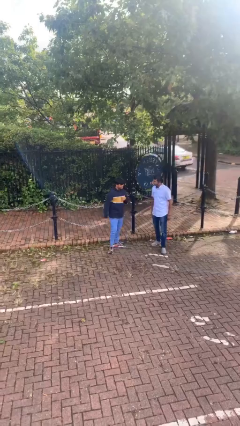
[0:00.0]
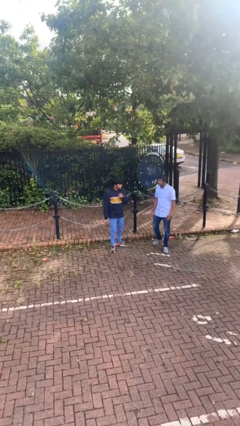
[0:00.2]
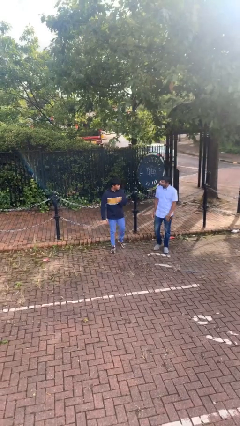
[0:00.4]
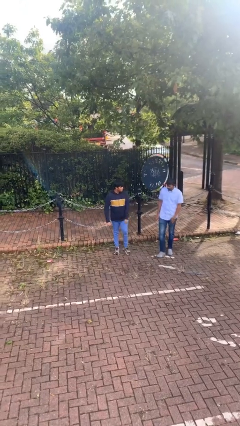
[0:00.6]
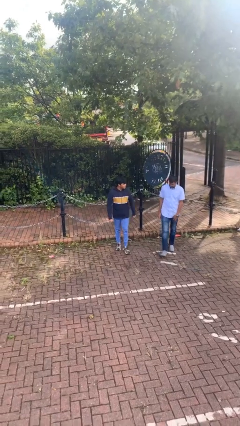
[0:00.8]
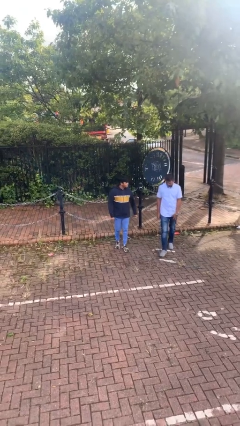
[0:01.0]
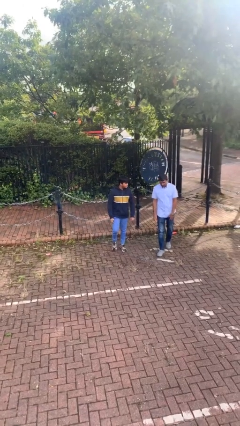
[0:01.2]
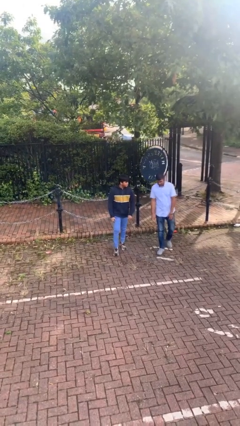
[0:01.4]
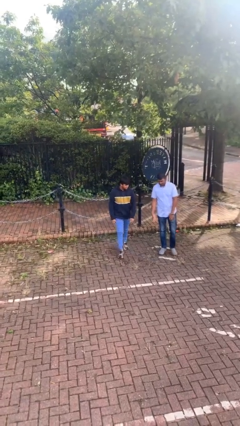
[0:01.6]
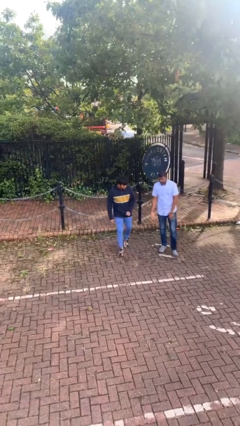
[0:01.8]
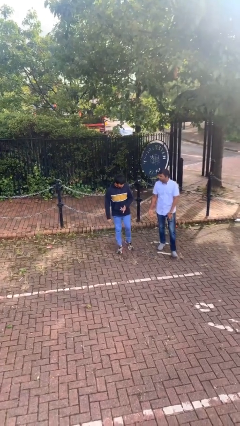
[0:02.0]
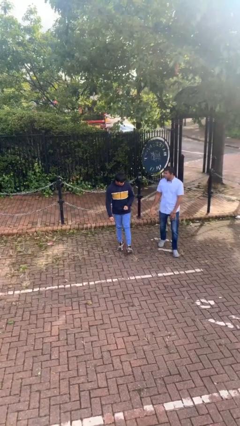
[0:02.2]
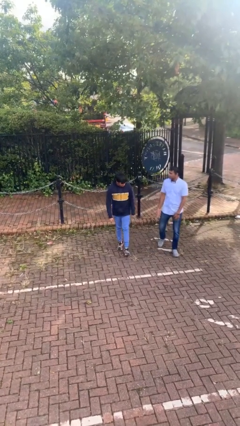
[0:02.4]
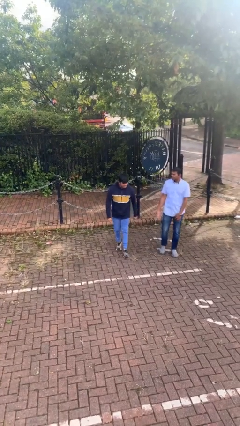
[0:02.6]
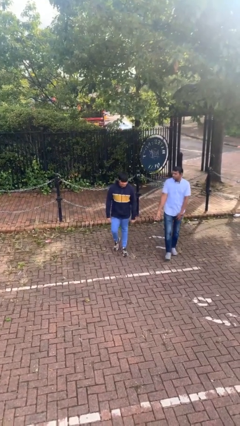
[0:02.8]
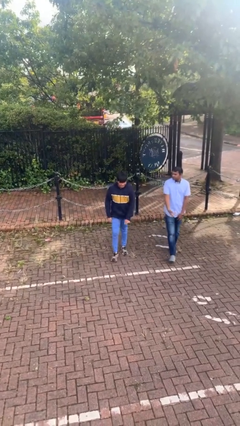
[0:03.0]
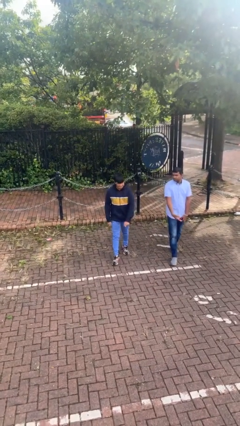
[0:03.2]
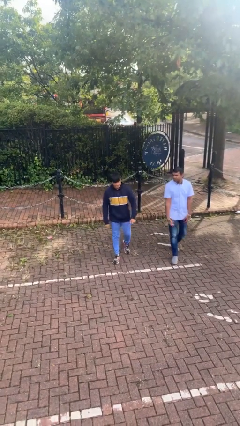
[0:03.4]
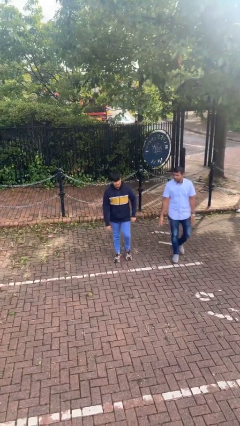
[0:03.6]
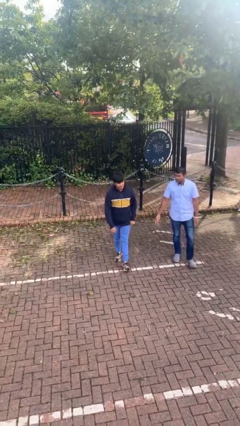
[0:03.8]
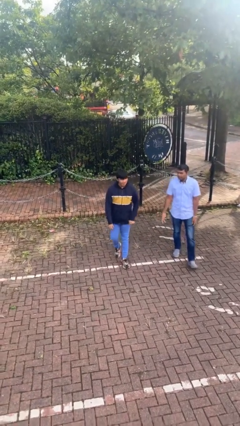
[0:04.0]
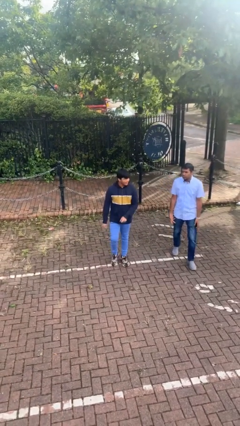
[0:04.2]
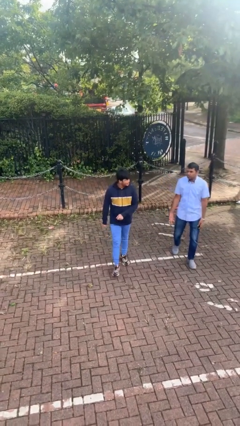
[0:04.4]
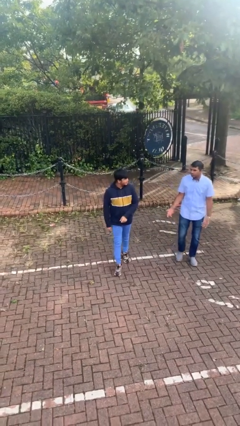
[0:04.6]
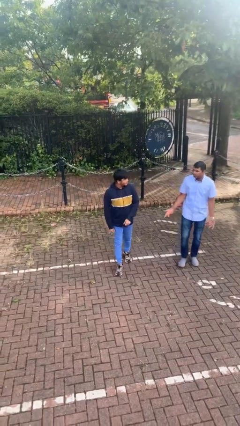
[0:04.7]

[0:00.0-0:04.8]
person talks to person

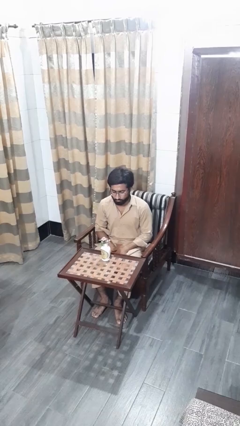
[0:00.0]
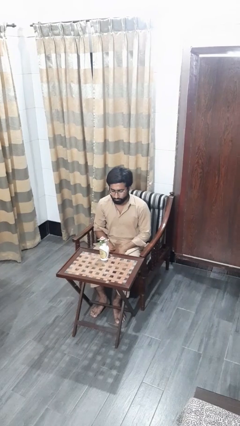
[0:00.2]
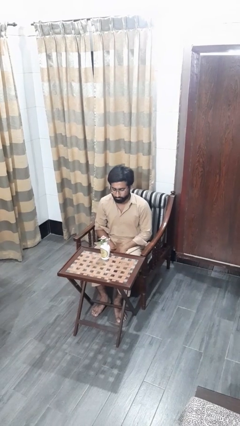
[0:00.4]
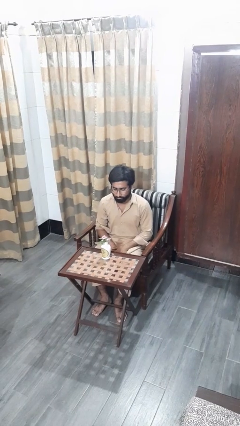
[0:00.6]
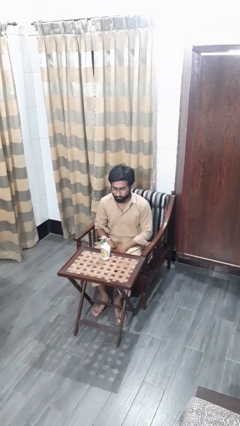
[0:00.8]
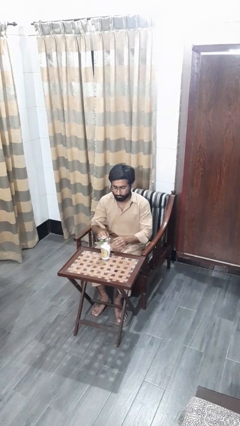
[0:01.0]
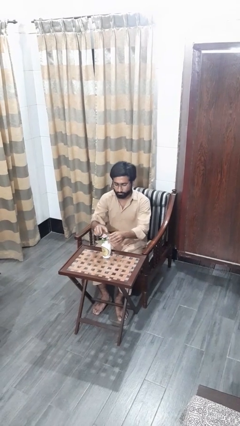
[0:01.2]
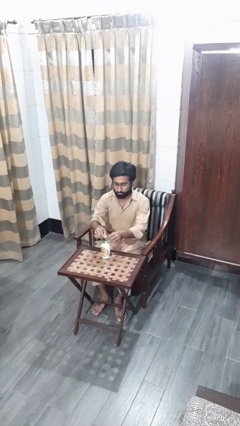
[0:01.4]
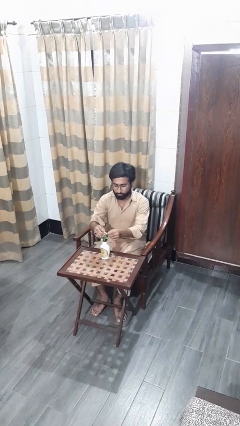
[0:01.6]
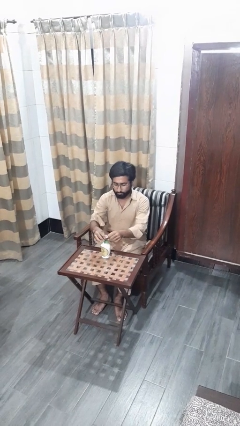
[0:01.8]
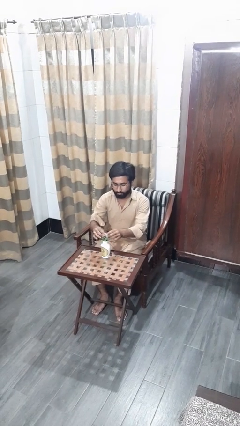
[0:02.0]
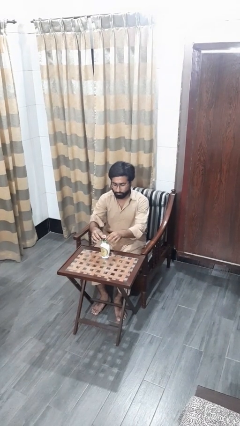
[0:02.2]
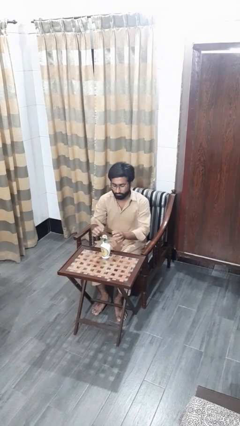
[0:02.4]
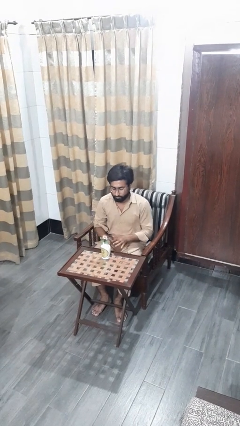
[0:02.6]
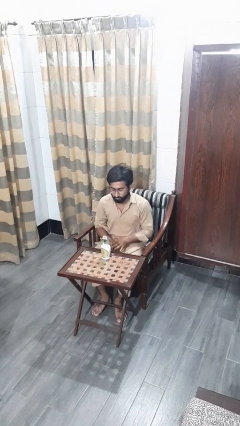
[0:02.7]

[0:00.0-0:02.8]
person arranges flowers in vase

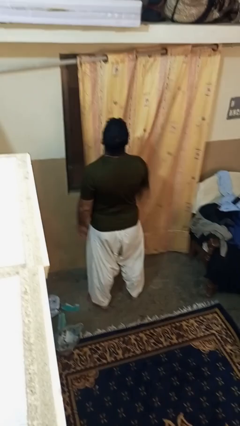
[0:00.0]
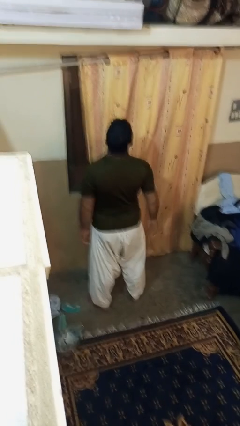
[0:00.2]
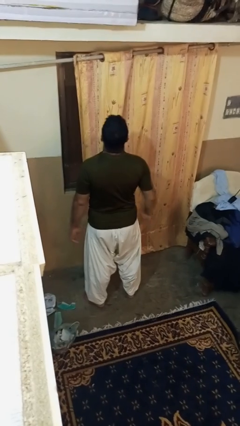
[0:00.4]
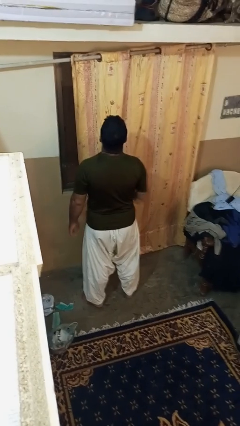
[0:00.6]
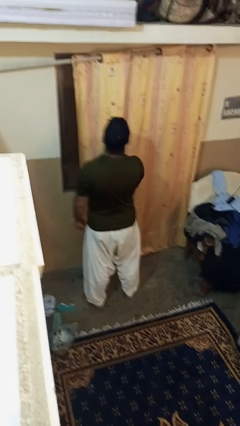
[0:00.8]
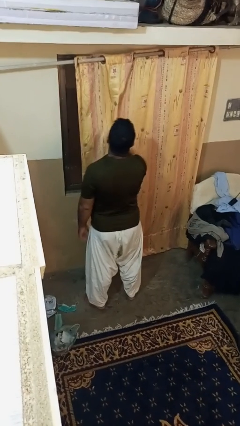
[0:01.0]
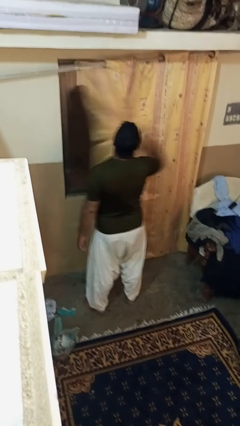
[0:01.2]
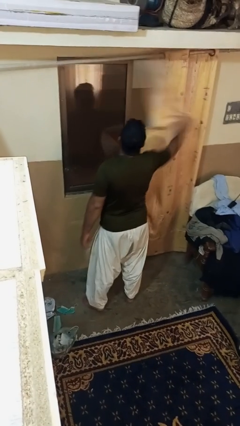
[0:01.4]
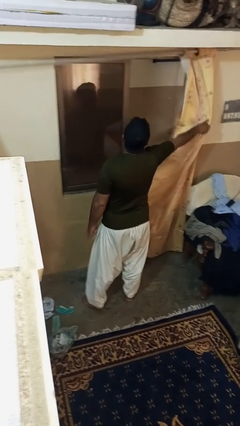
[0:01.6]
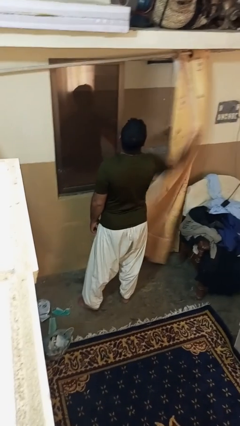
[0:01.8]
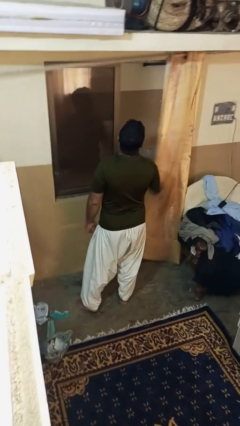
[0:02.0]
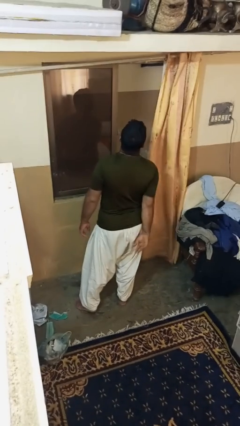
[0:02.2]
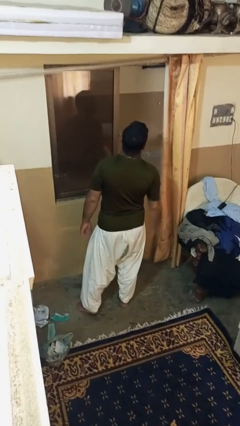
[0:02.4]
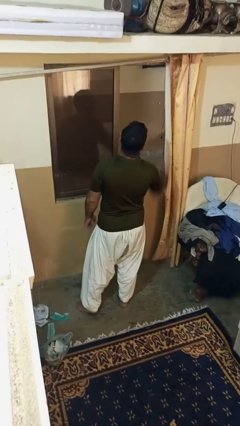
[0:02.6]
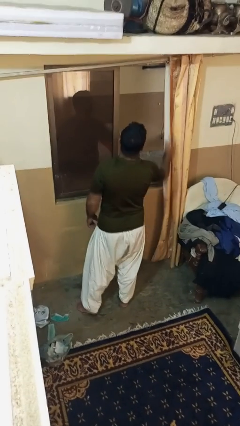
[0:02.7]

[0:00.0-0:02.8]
person opens curtains

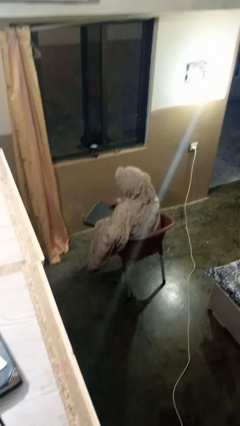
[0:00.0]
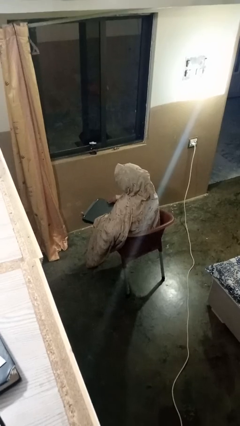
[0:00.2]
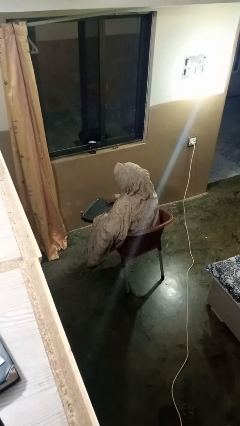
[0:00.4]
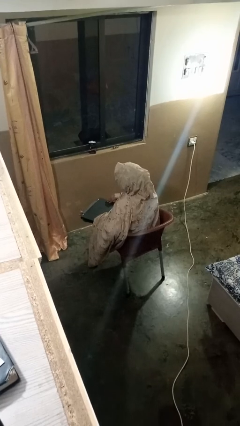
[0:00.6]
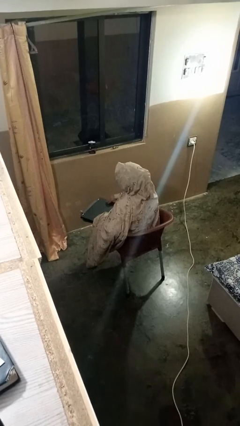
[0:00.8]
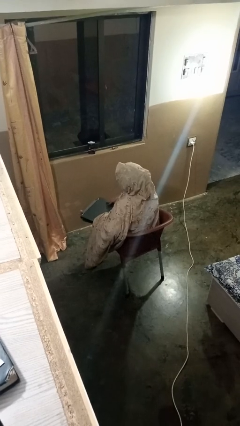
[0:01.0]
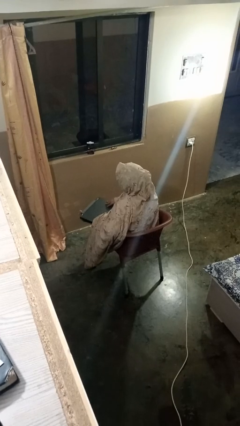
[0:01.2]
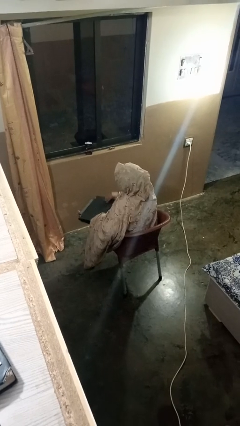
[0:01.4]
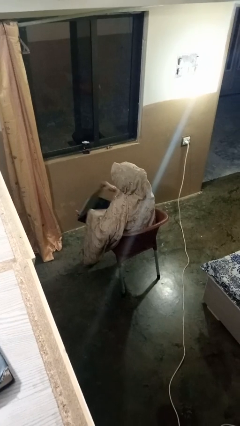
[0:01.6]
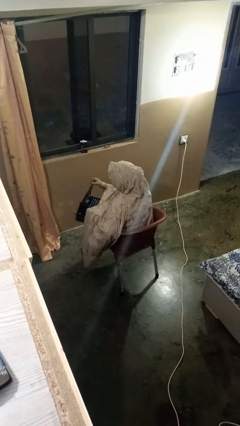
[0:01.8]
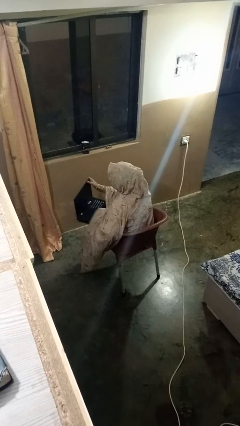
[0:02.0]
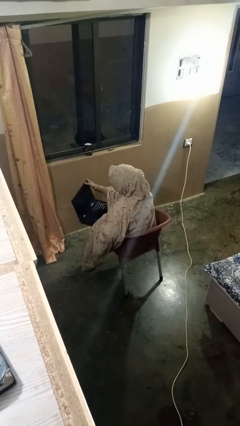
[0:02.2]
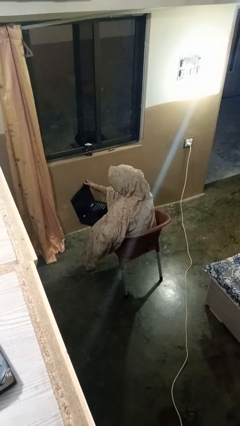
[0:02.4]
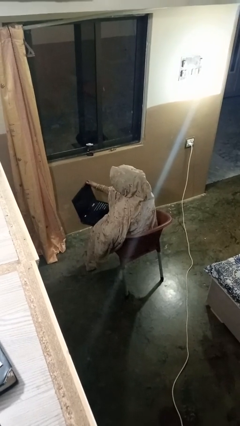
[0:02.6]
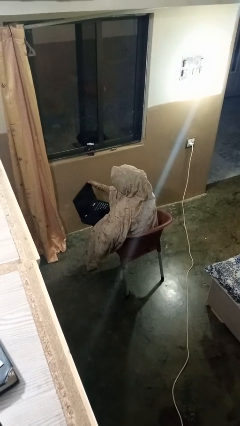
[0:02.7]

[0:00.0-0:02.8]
person opens laptop

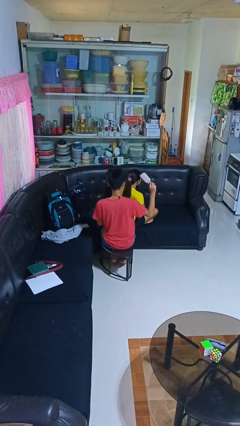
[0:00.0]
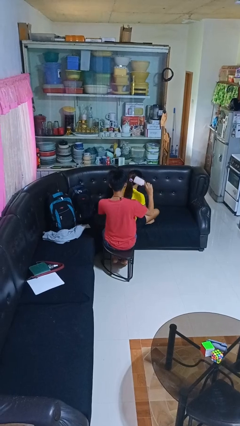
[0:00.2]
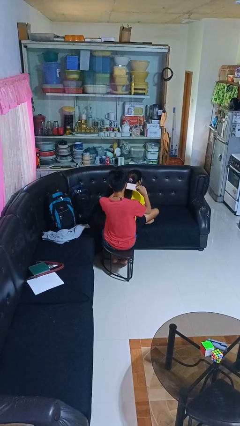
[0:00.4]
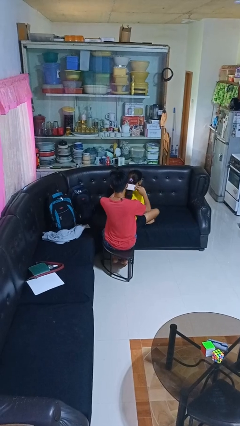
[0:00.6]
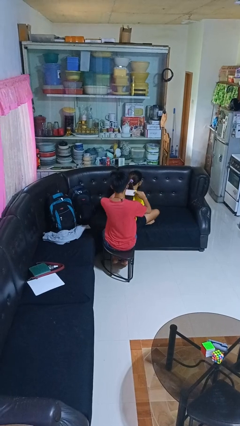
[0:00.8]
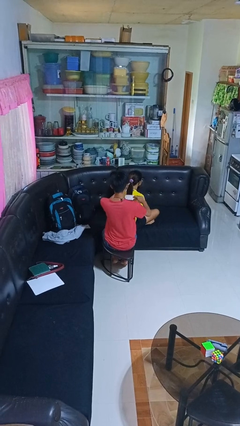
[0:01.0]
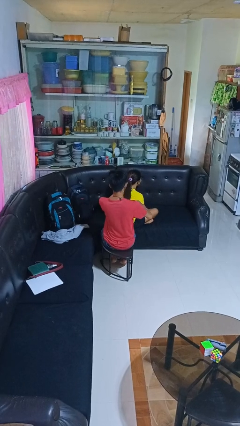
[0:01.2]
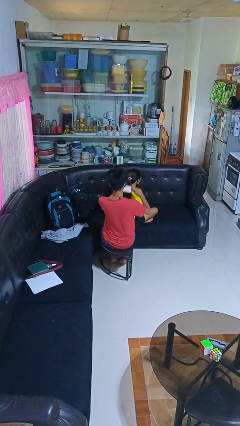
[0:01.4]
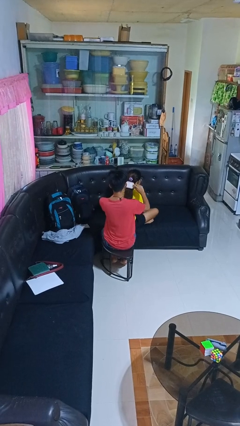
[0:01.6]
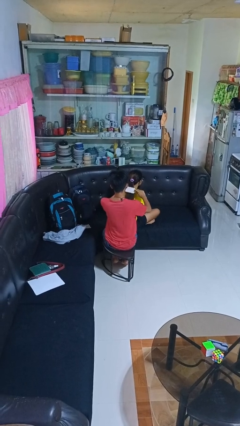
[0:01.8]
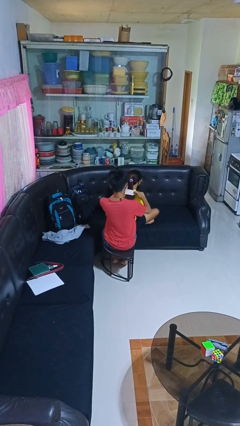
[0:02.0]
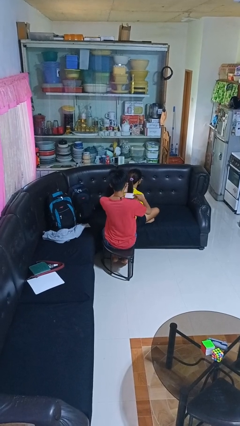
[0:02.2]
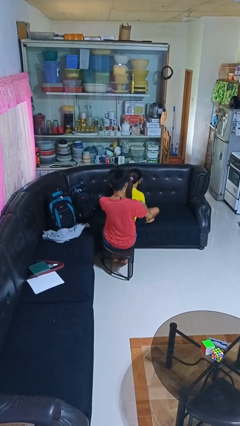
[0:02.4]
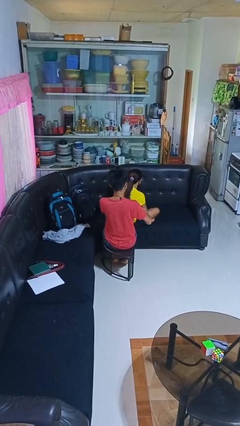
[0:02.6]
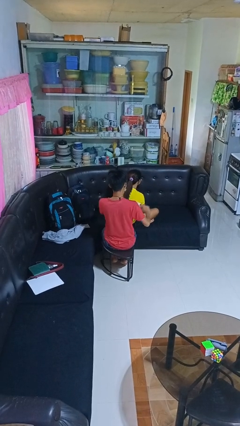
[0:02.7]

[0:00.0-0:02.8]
person brushes hair of person

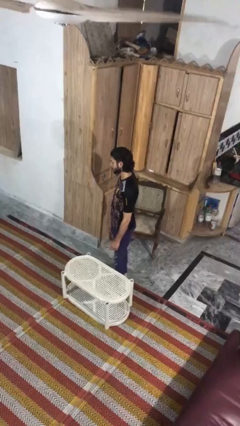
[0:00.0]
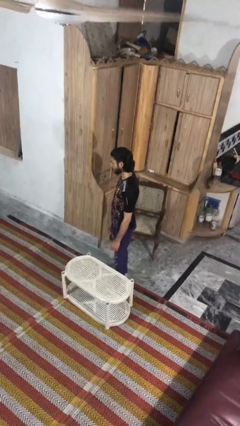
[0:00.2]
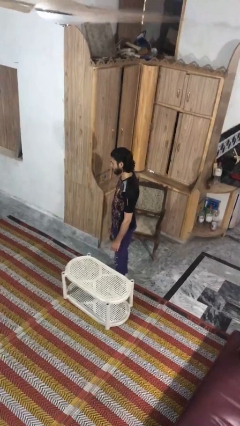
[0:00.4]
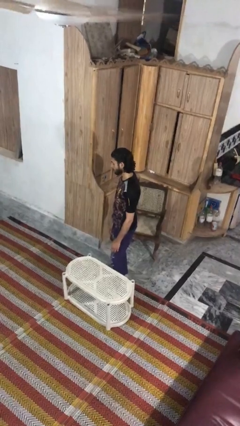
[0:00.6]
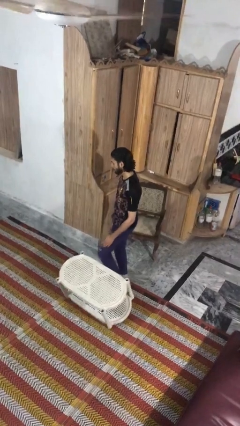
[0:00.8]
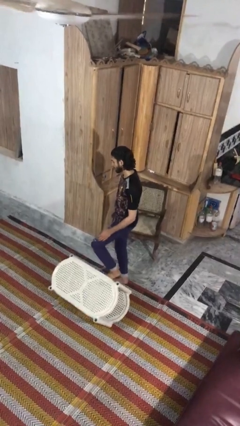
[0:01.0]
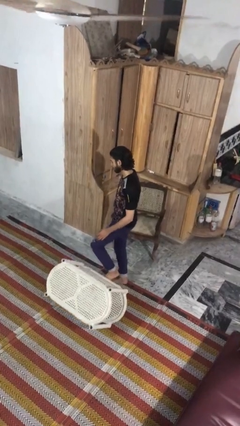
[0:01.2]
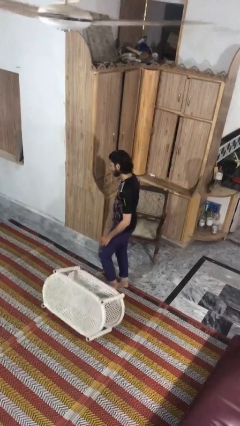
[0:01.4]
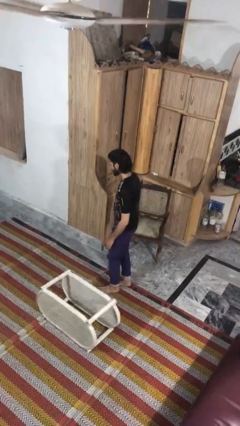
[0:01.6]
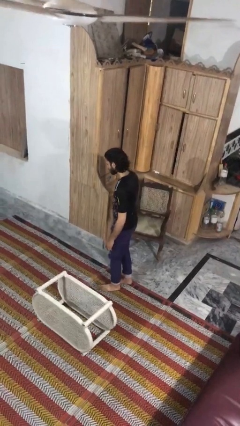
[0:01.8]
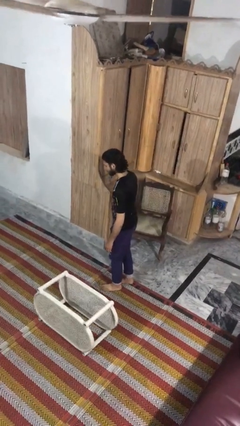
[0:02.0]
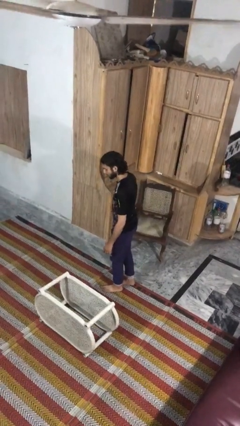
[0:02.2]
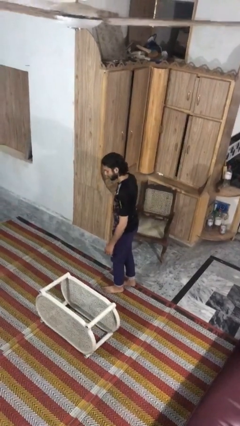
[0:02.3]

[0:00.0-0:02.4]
person knocks over furniture
